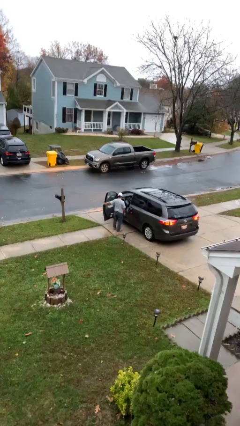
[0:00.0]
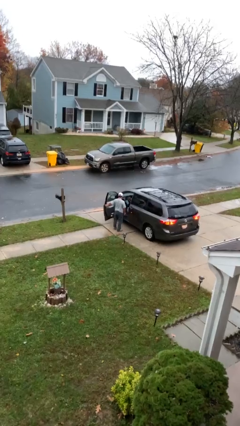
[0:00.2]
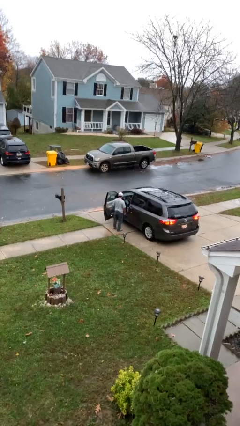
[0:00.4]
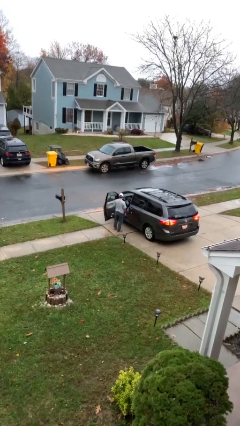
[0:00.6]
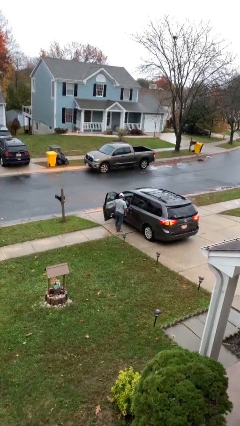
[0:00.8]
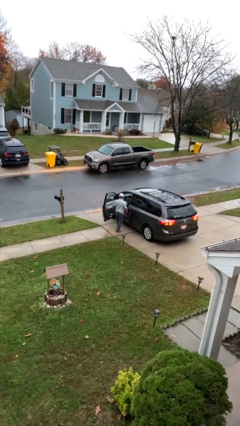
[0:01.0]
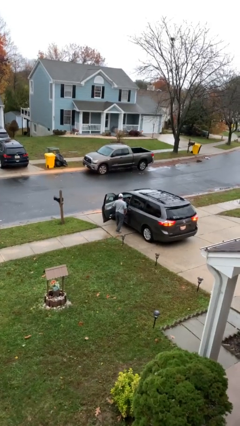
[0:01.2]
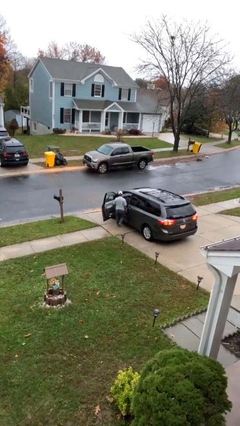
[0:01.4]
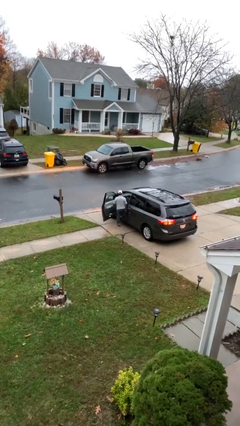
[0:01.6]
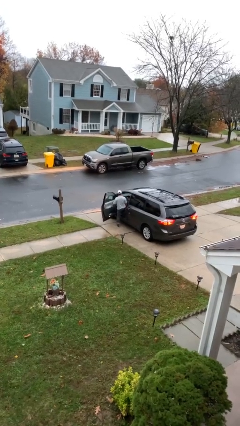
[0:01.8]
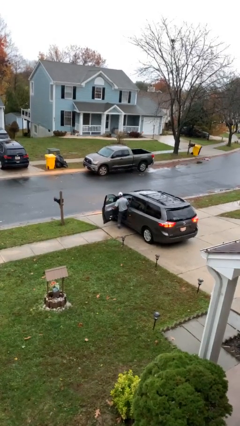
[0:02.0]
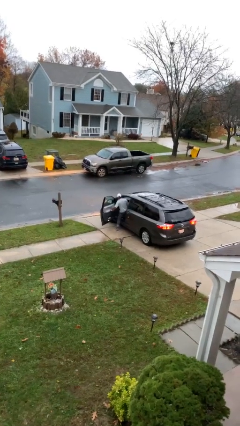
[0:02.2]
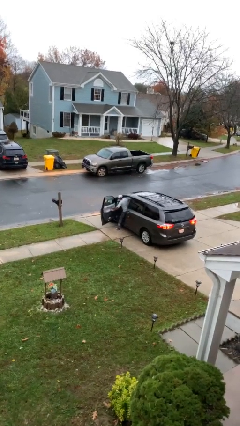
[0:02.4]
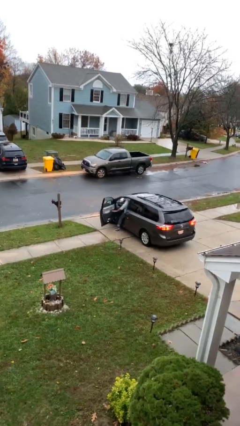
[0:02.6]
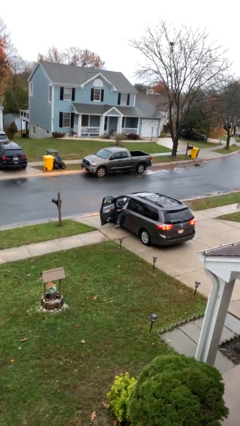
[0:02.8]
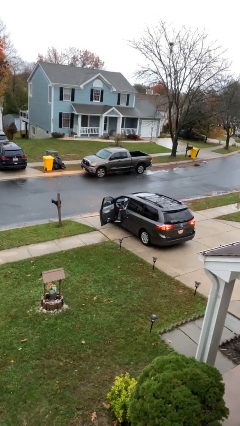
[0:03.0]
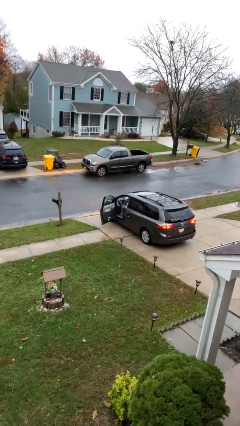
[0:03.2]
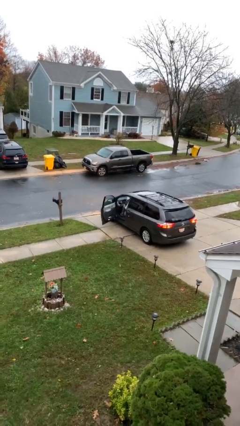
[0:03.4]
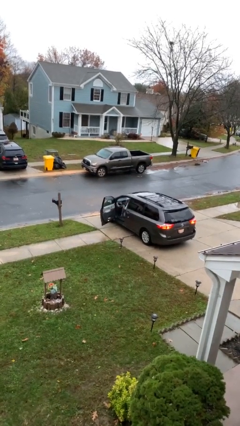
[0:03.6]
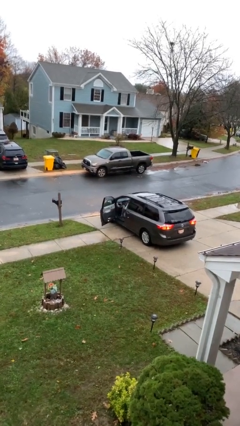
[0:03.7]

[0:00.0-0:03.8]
person enters car

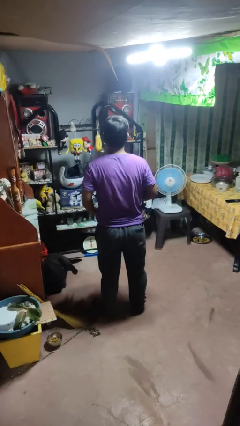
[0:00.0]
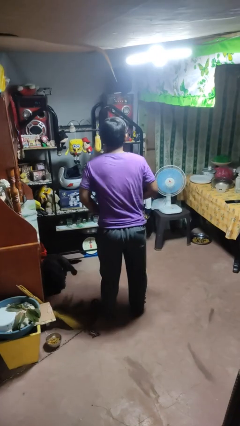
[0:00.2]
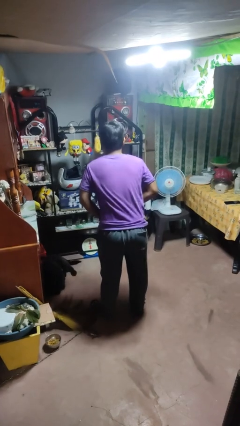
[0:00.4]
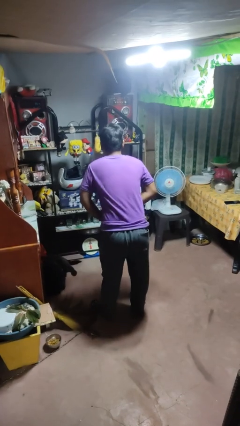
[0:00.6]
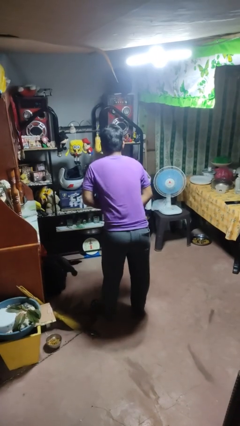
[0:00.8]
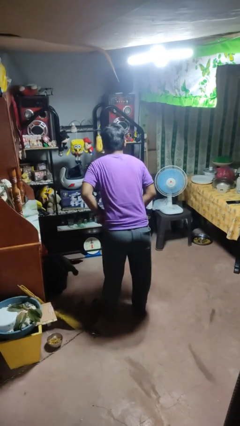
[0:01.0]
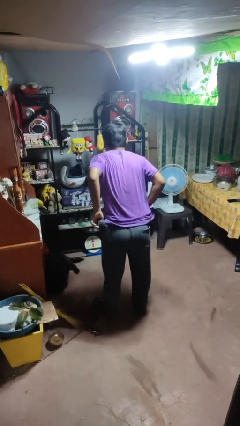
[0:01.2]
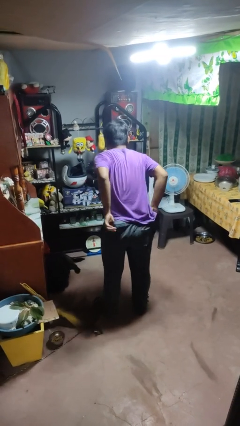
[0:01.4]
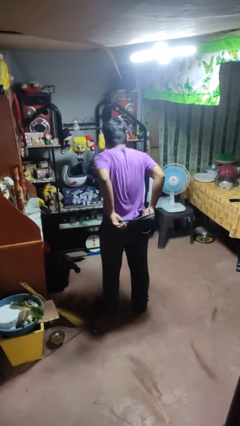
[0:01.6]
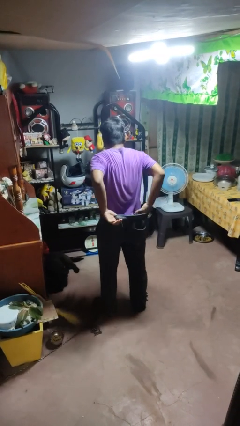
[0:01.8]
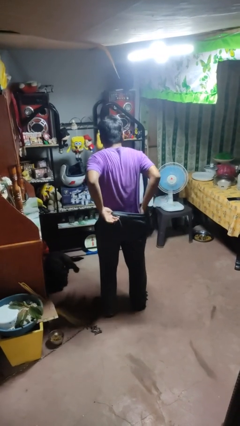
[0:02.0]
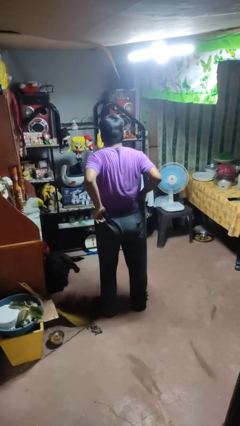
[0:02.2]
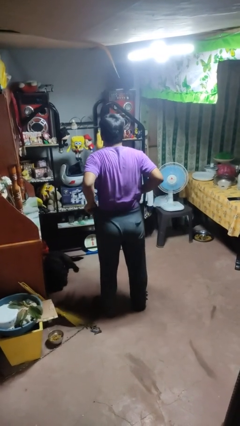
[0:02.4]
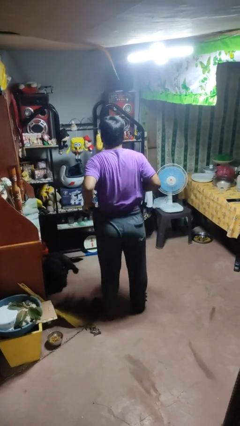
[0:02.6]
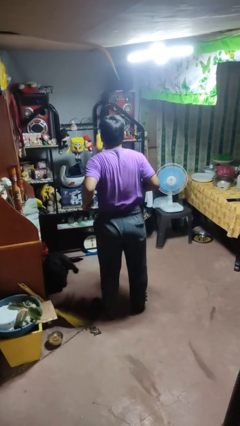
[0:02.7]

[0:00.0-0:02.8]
person tucks in shirt

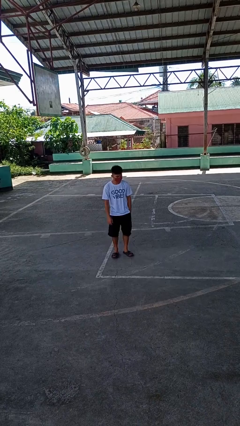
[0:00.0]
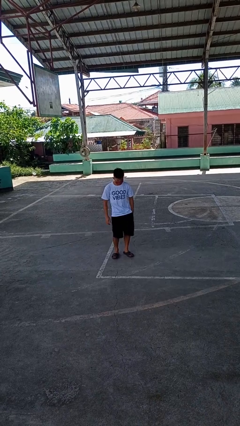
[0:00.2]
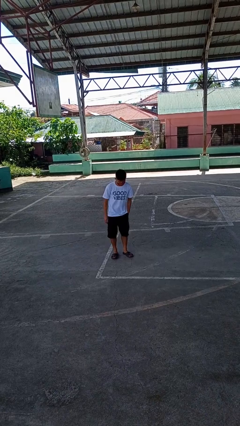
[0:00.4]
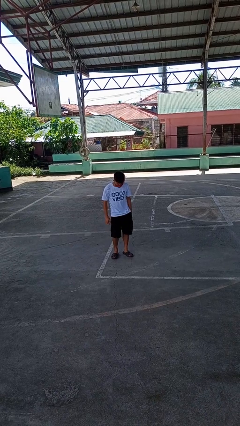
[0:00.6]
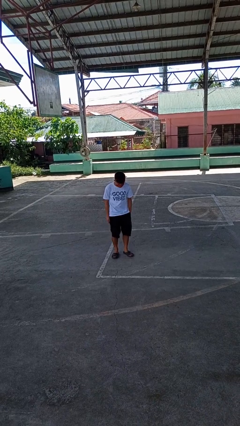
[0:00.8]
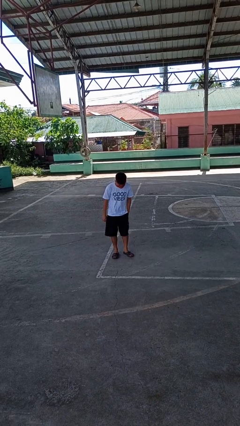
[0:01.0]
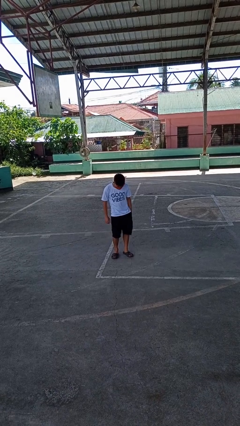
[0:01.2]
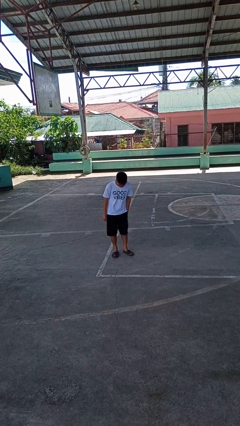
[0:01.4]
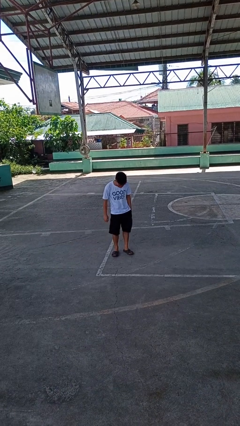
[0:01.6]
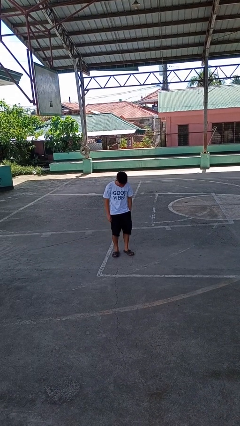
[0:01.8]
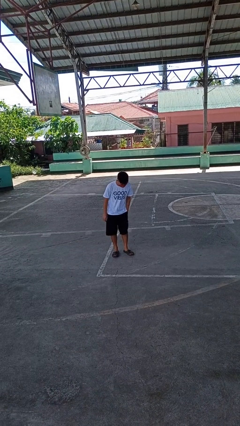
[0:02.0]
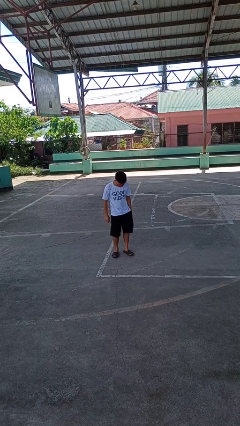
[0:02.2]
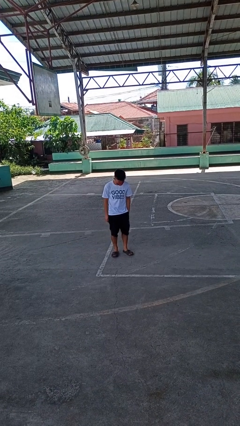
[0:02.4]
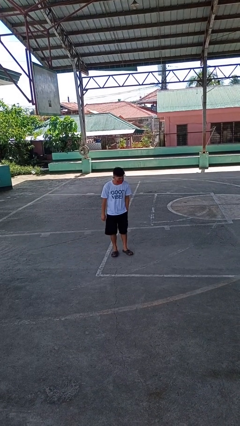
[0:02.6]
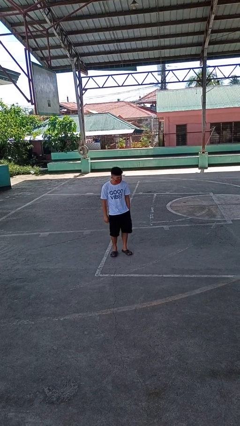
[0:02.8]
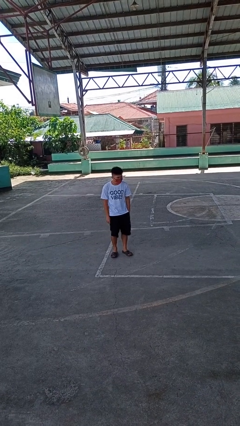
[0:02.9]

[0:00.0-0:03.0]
person wiggles hips

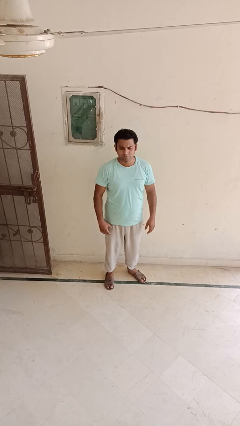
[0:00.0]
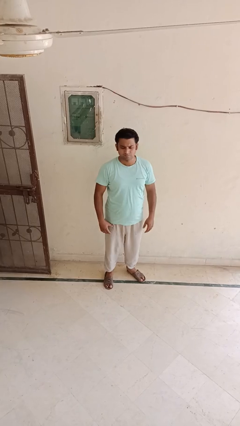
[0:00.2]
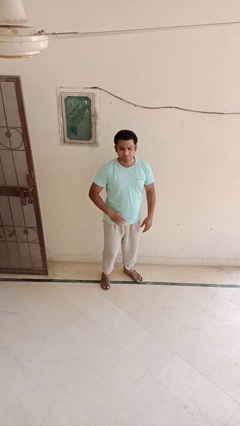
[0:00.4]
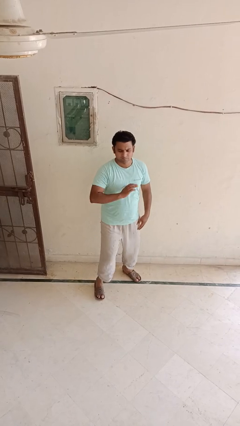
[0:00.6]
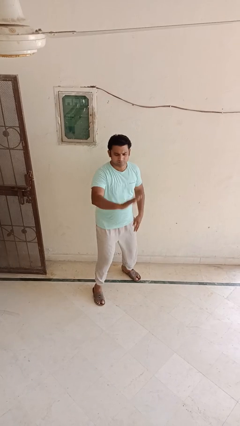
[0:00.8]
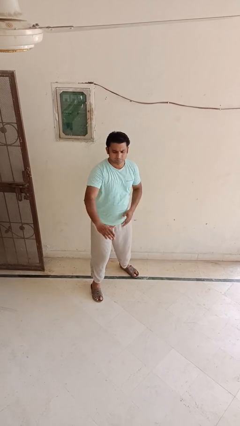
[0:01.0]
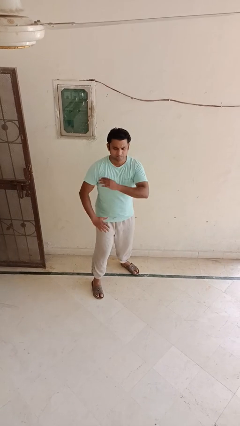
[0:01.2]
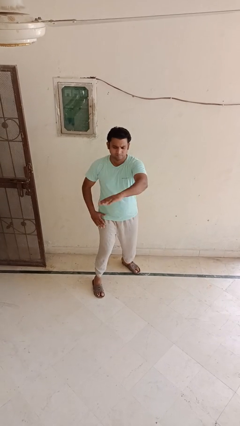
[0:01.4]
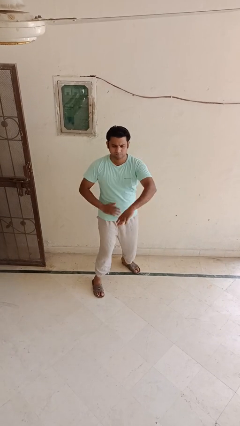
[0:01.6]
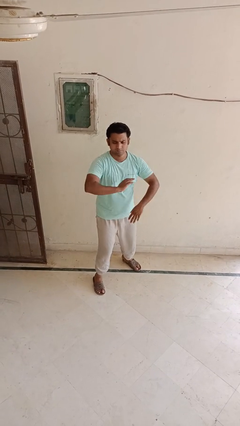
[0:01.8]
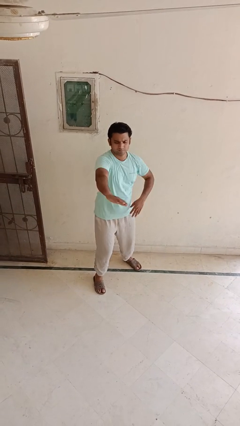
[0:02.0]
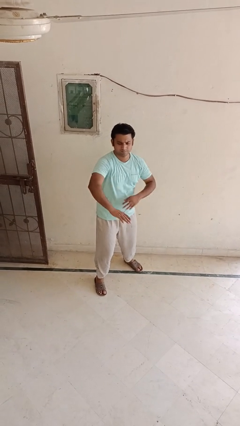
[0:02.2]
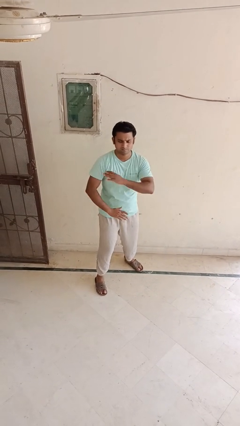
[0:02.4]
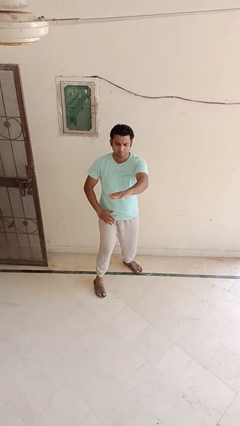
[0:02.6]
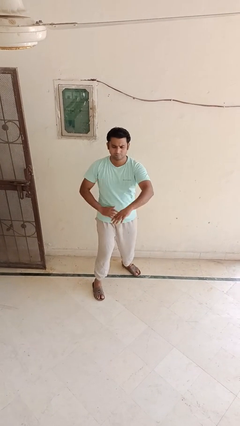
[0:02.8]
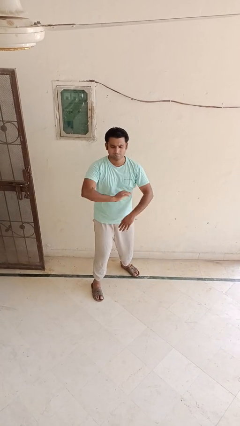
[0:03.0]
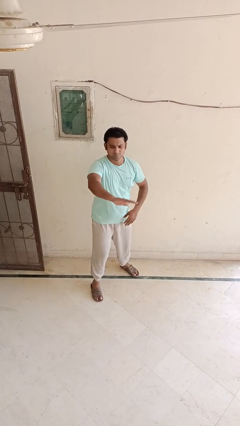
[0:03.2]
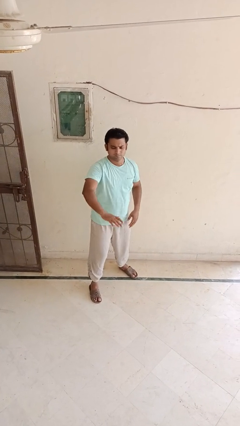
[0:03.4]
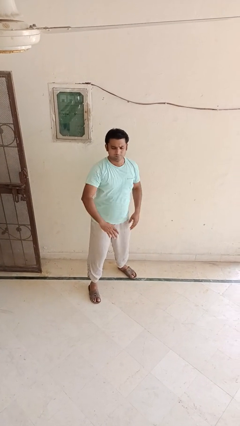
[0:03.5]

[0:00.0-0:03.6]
person karate chop

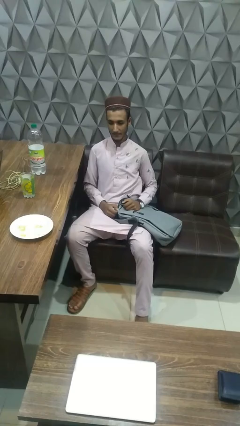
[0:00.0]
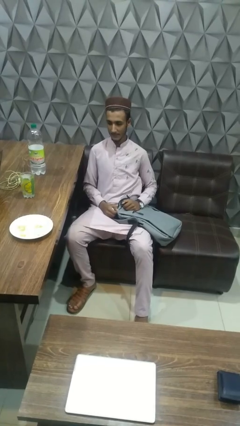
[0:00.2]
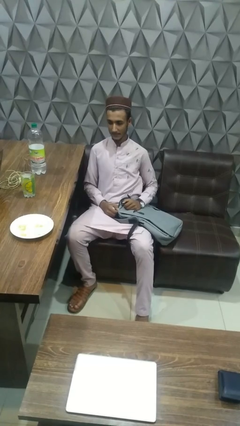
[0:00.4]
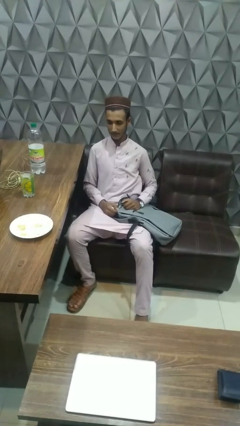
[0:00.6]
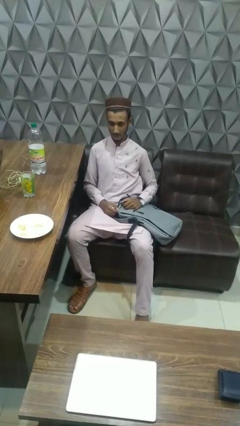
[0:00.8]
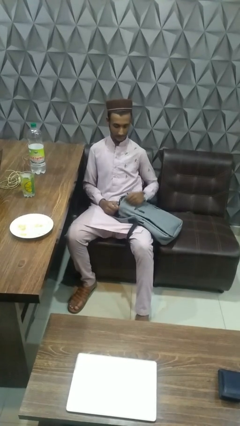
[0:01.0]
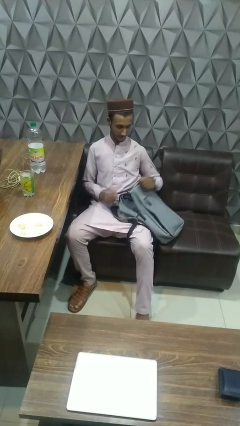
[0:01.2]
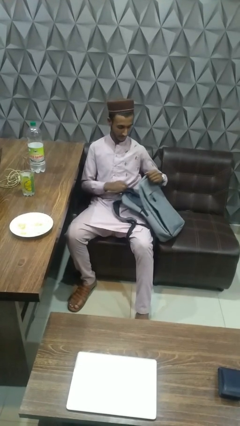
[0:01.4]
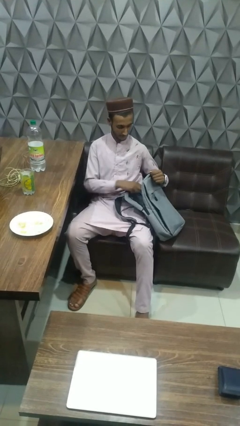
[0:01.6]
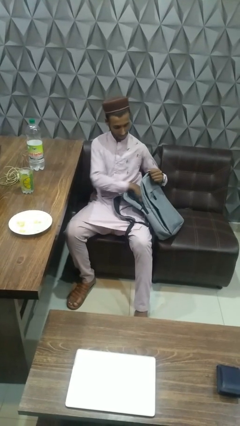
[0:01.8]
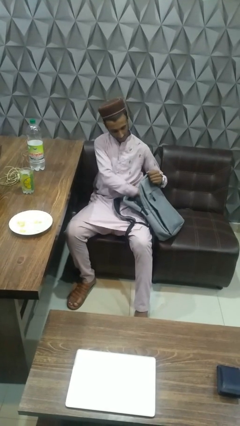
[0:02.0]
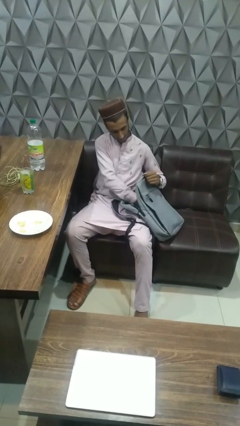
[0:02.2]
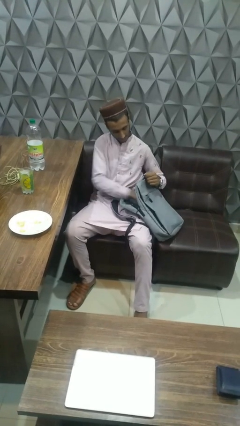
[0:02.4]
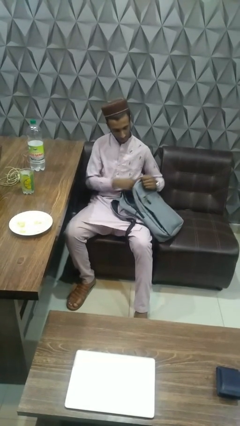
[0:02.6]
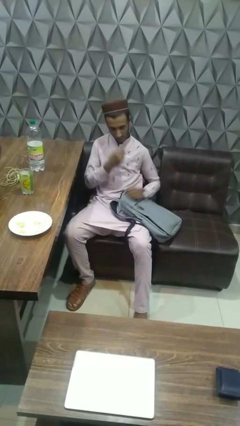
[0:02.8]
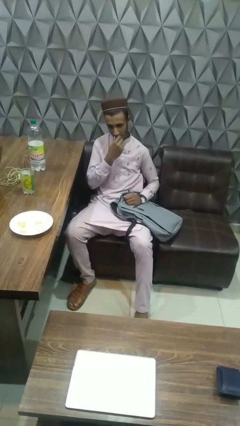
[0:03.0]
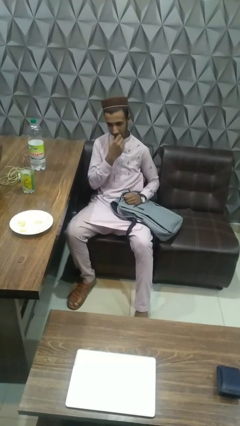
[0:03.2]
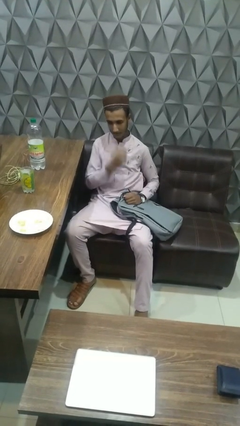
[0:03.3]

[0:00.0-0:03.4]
person eats snack from bag

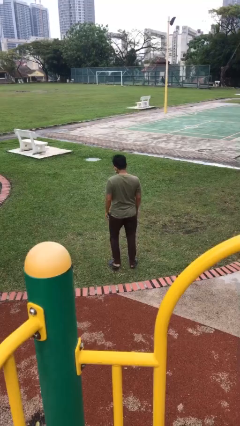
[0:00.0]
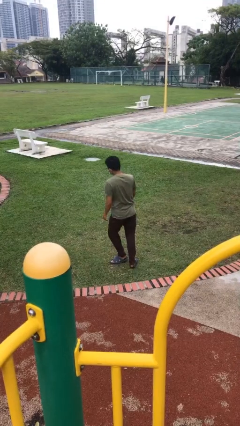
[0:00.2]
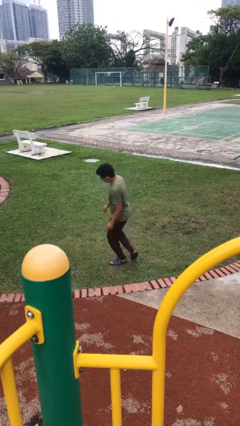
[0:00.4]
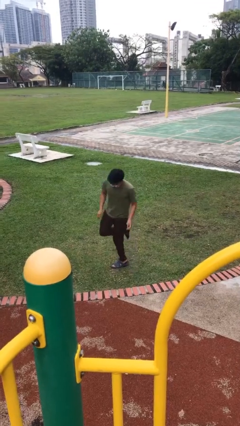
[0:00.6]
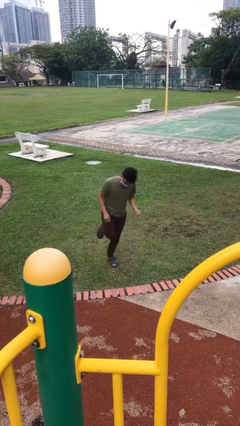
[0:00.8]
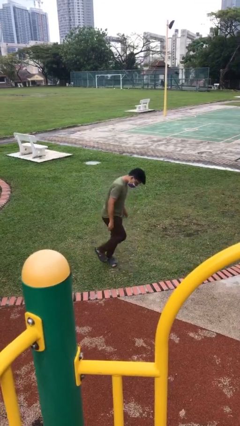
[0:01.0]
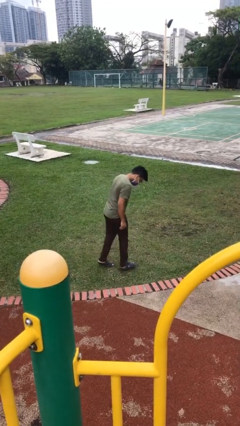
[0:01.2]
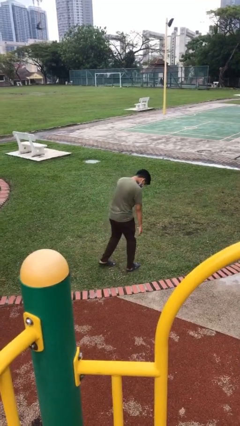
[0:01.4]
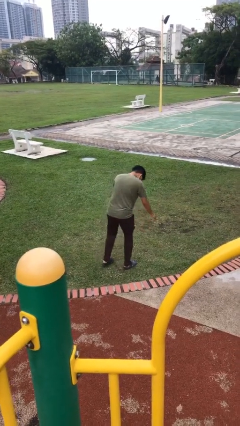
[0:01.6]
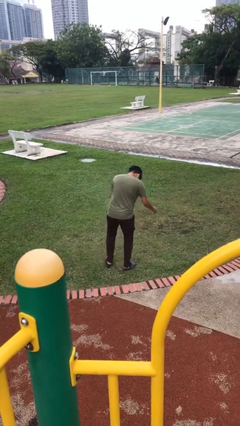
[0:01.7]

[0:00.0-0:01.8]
person twirls
